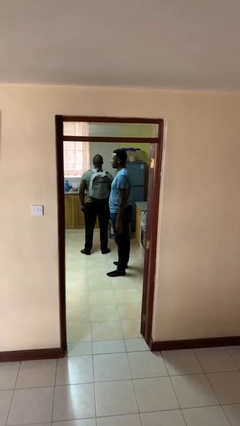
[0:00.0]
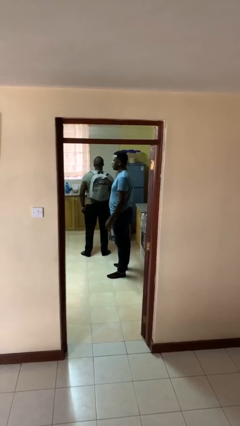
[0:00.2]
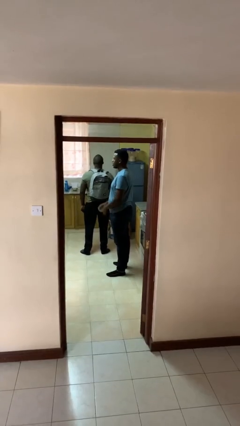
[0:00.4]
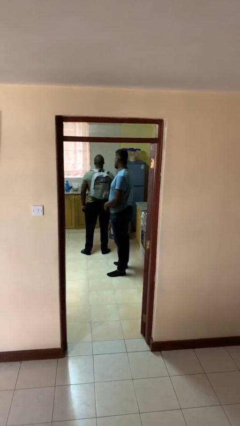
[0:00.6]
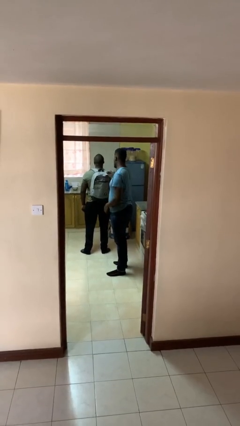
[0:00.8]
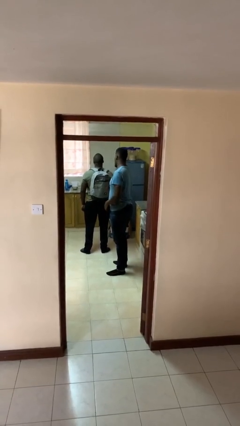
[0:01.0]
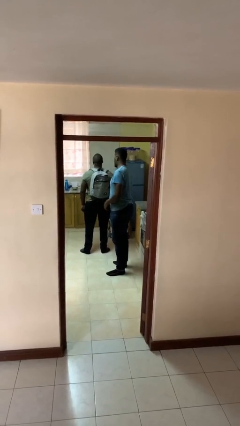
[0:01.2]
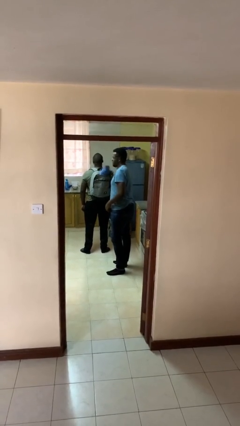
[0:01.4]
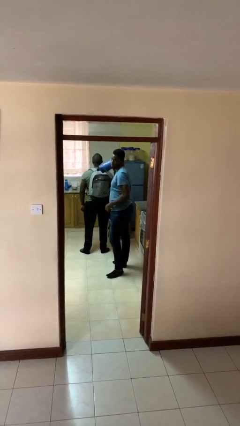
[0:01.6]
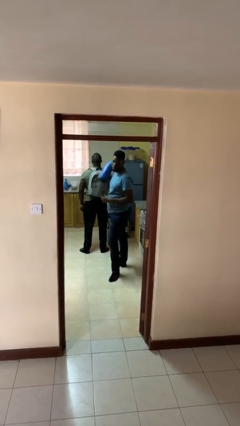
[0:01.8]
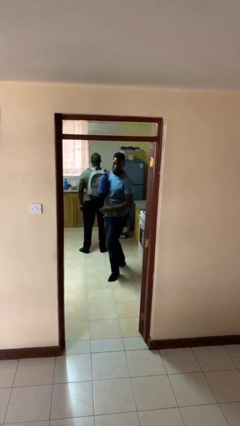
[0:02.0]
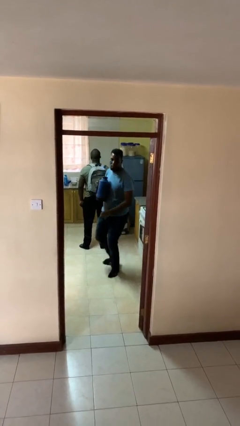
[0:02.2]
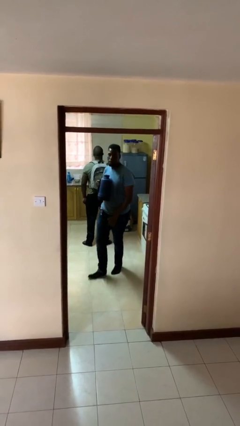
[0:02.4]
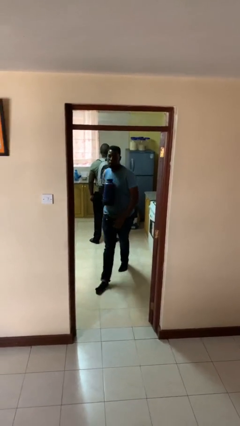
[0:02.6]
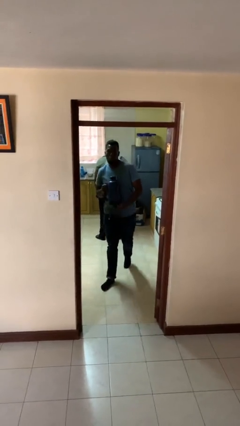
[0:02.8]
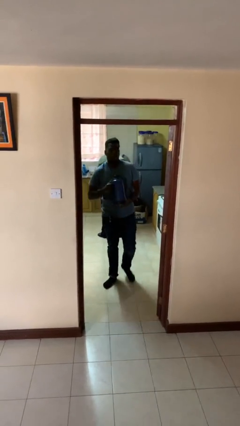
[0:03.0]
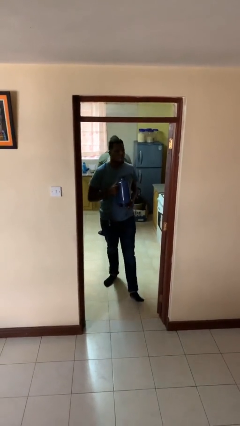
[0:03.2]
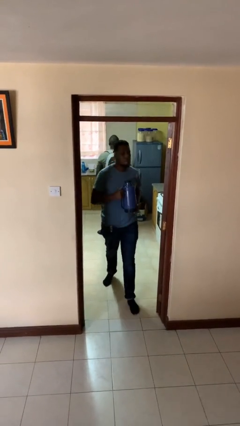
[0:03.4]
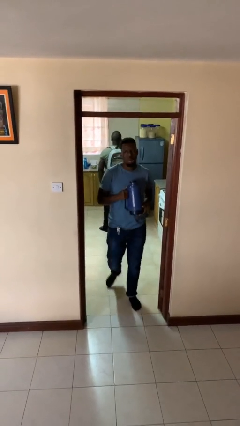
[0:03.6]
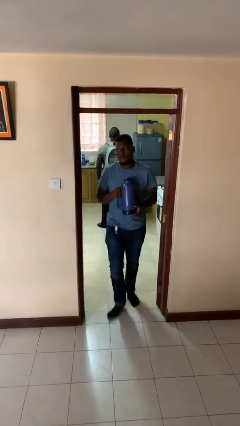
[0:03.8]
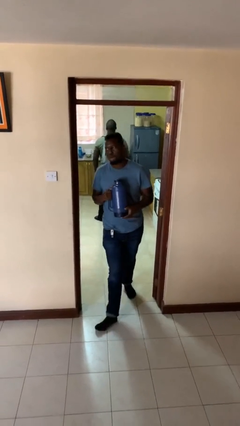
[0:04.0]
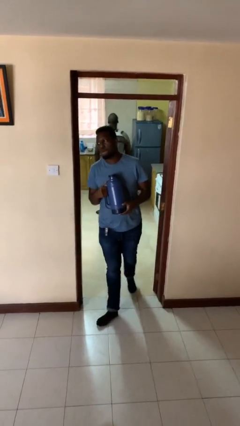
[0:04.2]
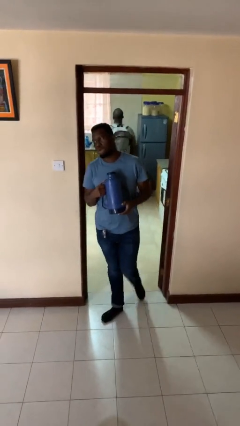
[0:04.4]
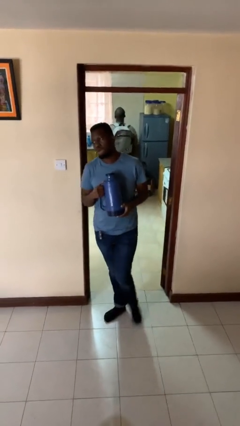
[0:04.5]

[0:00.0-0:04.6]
person steals object from person

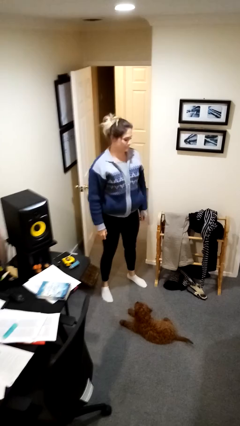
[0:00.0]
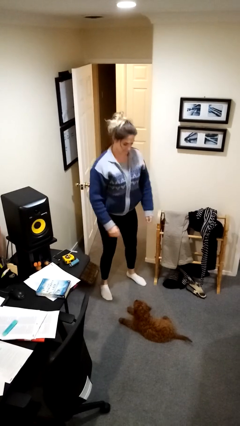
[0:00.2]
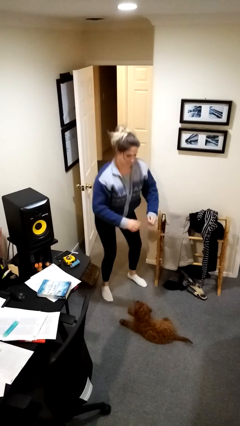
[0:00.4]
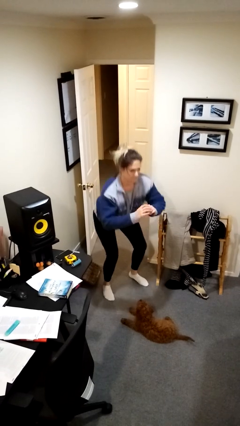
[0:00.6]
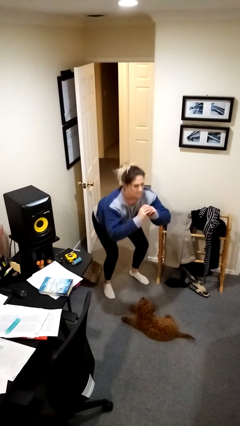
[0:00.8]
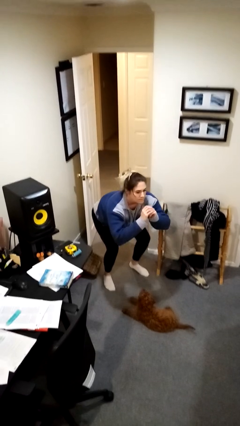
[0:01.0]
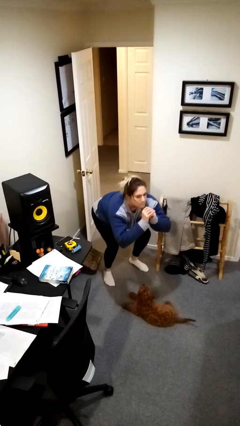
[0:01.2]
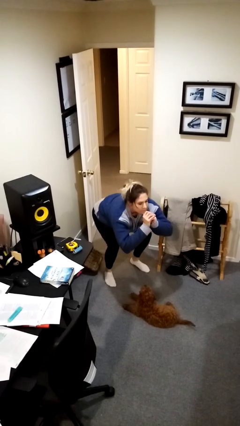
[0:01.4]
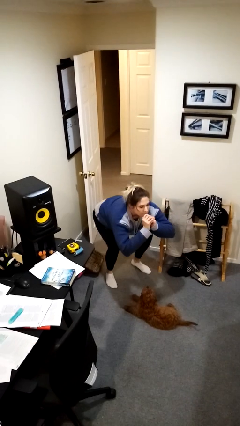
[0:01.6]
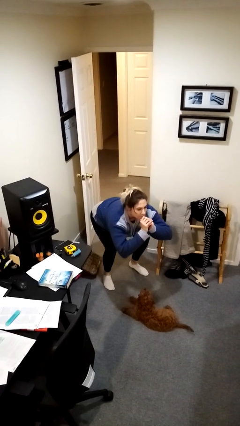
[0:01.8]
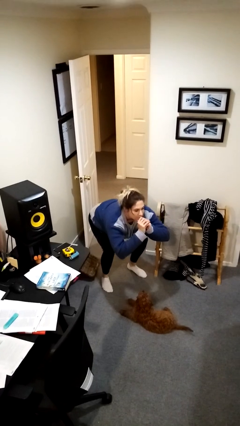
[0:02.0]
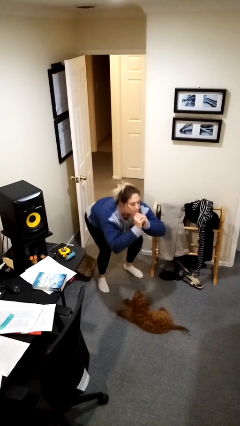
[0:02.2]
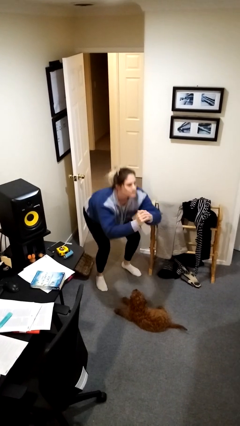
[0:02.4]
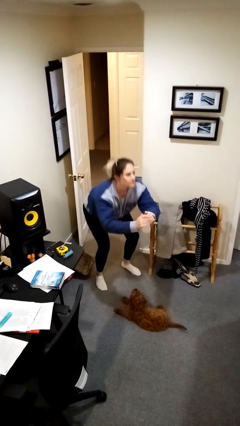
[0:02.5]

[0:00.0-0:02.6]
person squats

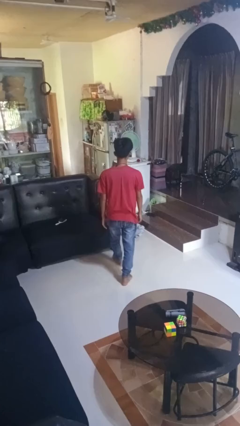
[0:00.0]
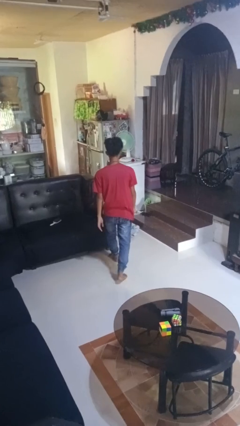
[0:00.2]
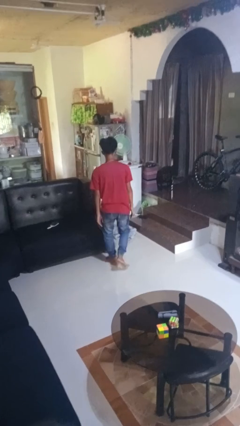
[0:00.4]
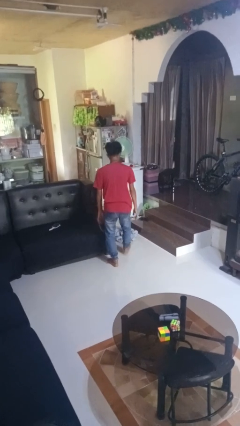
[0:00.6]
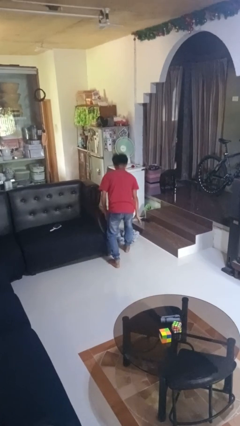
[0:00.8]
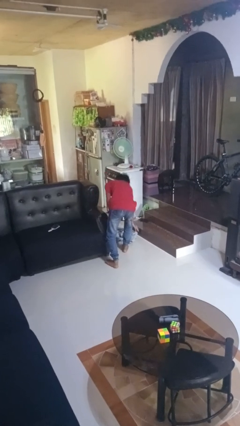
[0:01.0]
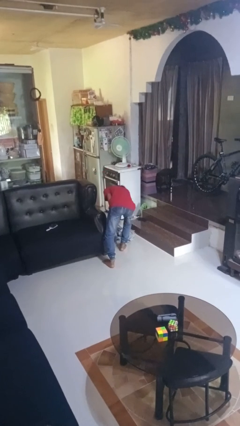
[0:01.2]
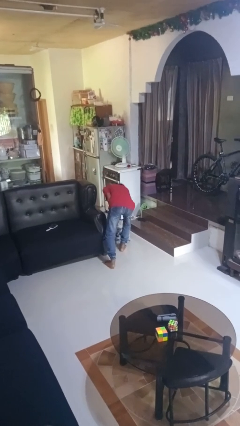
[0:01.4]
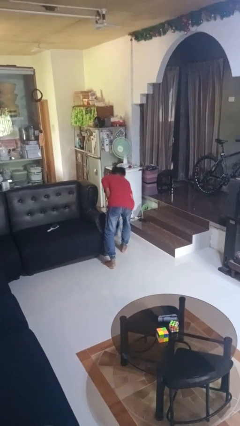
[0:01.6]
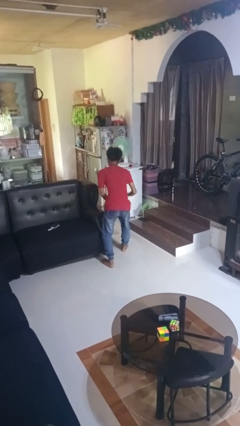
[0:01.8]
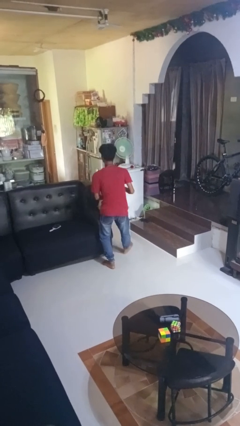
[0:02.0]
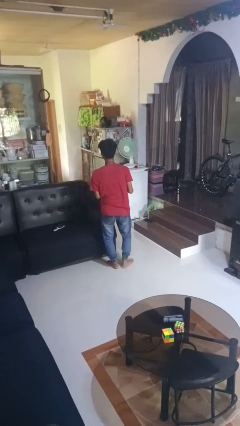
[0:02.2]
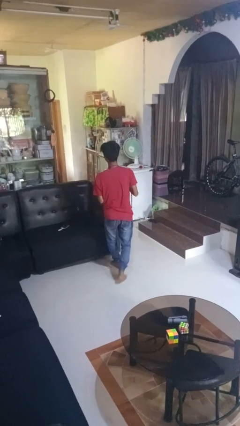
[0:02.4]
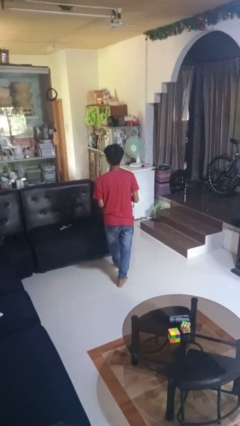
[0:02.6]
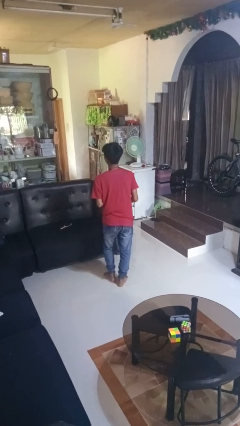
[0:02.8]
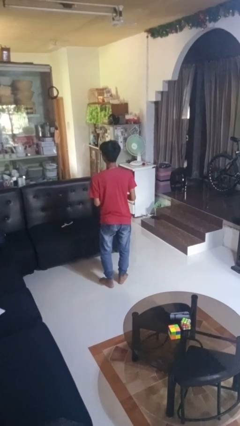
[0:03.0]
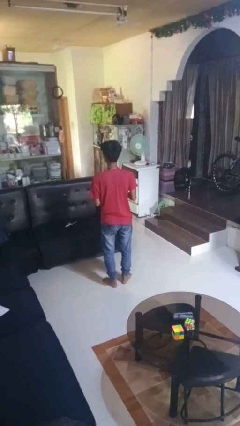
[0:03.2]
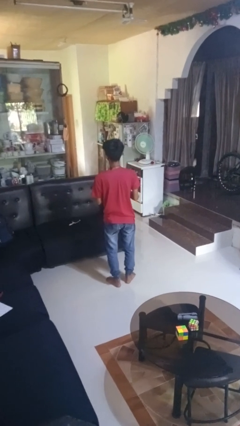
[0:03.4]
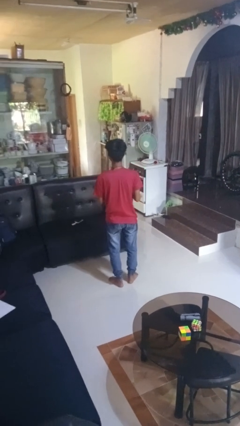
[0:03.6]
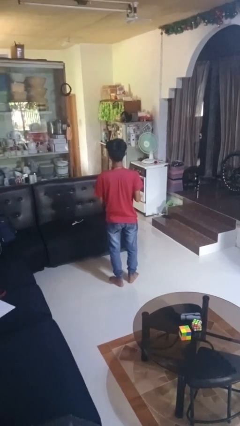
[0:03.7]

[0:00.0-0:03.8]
person picks up object from floor

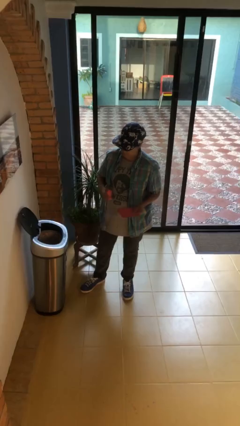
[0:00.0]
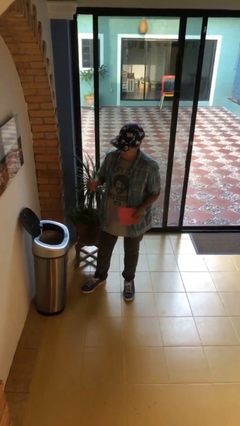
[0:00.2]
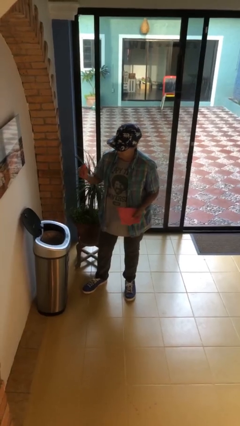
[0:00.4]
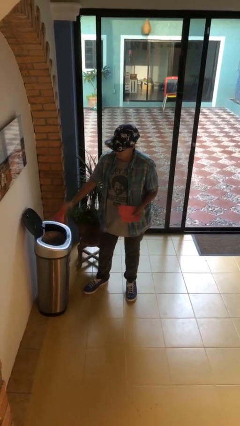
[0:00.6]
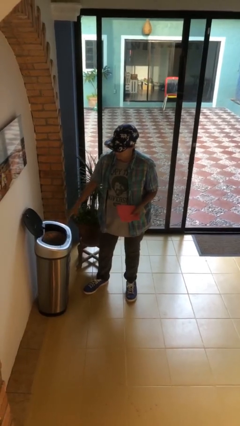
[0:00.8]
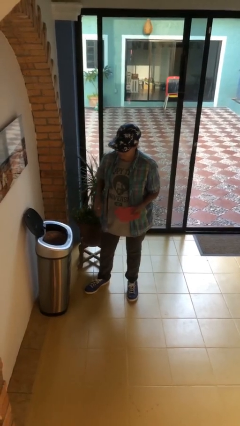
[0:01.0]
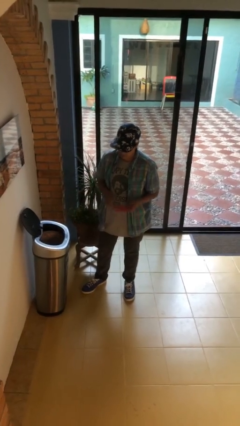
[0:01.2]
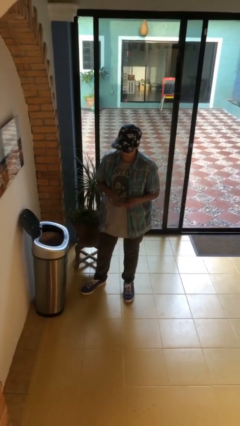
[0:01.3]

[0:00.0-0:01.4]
person discards trash

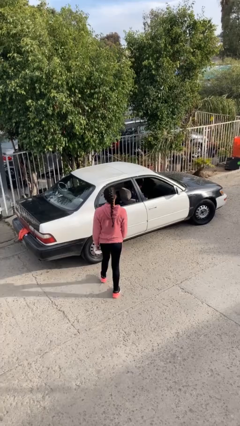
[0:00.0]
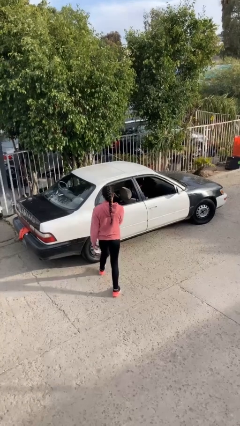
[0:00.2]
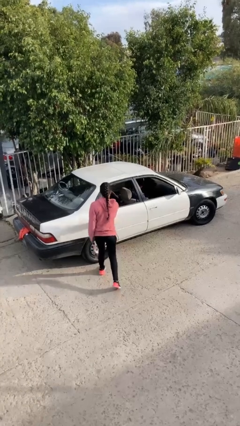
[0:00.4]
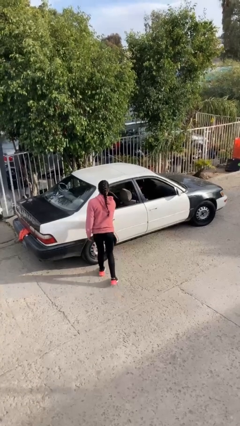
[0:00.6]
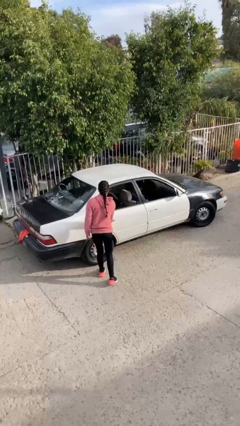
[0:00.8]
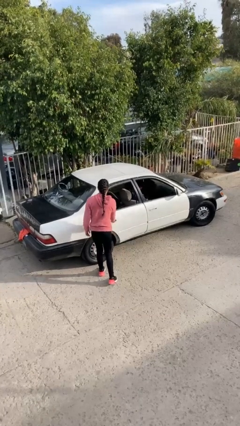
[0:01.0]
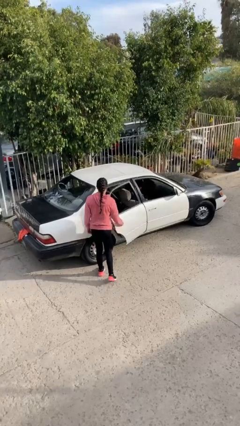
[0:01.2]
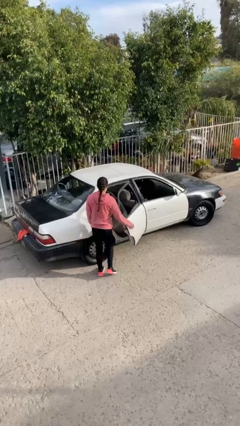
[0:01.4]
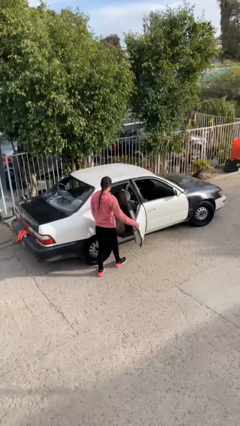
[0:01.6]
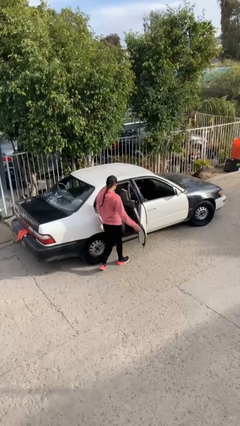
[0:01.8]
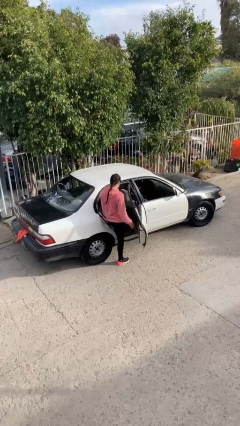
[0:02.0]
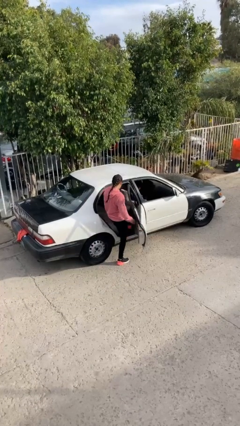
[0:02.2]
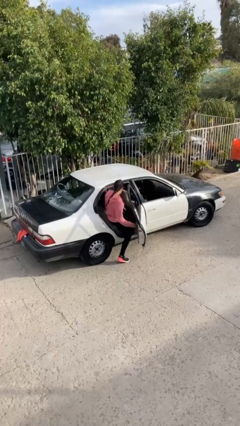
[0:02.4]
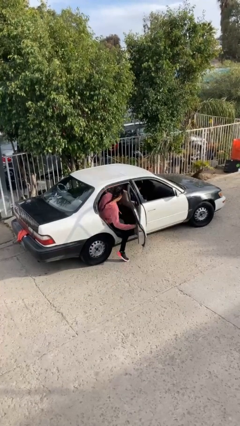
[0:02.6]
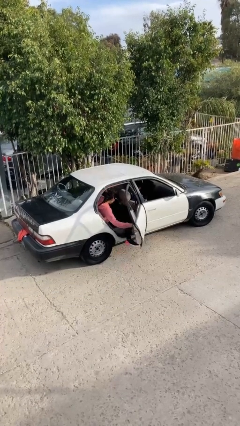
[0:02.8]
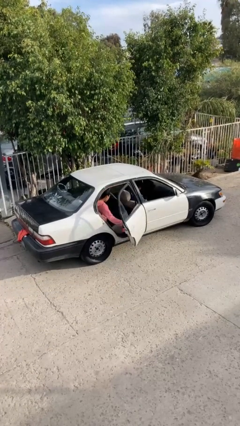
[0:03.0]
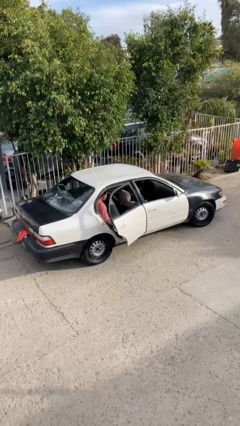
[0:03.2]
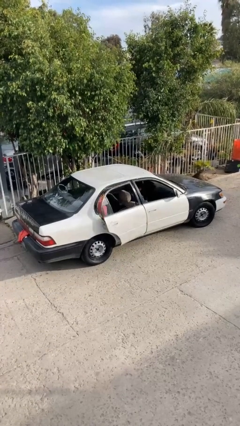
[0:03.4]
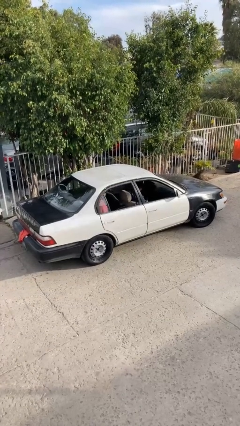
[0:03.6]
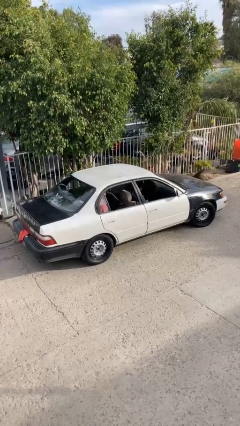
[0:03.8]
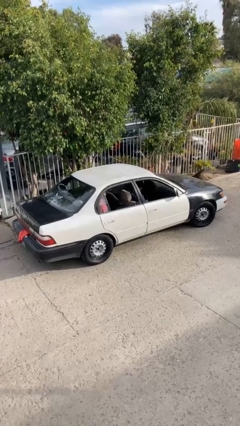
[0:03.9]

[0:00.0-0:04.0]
car picks up person

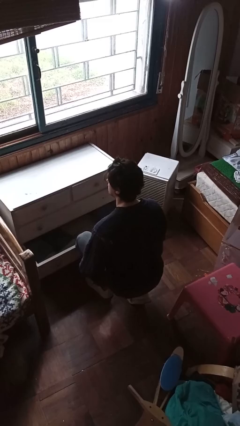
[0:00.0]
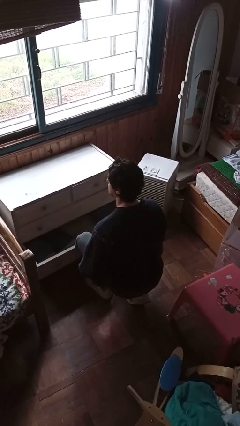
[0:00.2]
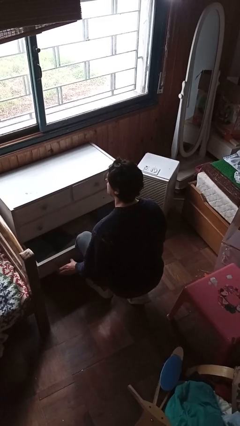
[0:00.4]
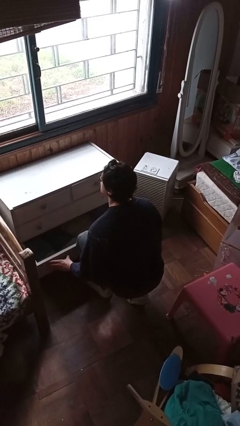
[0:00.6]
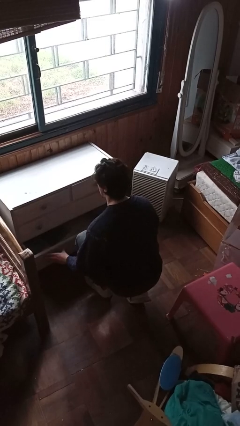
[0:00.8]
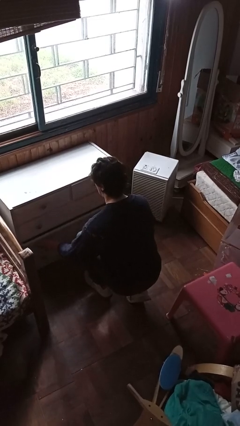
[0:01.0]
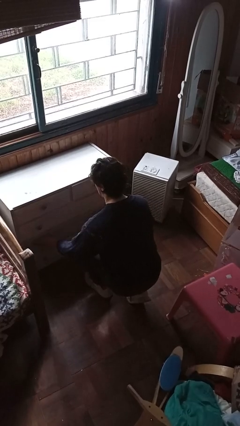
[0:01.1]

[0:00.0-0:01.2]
person closes dresser drawer

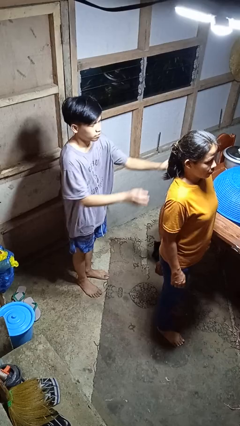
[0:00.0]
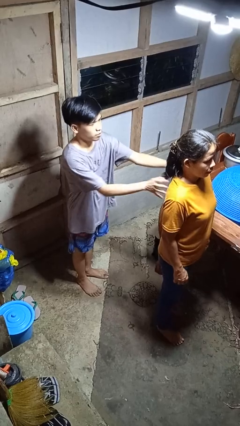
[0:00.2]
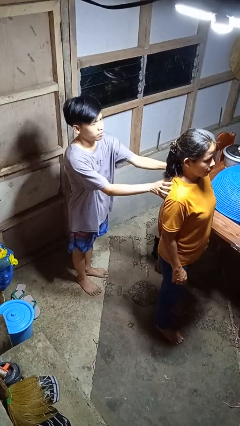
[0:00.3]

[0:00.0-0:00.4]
person grabs person by shoulder
